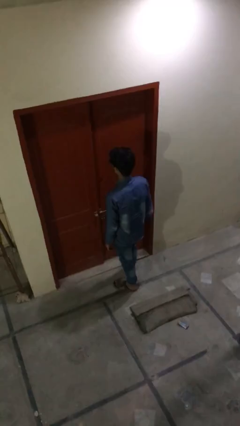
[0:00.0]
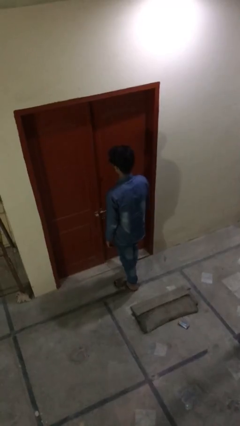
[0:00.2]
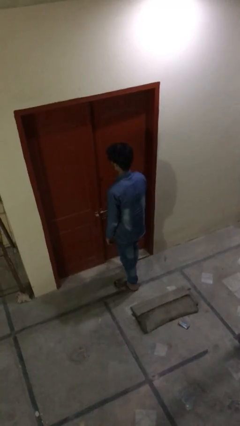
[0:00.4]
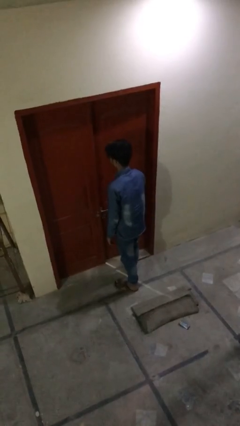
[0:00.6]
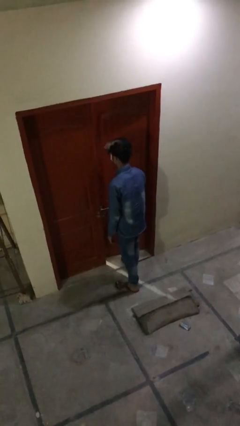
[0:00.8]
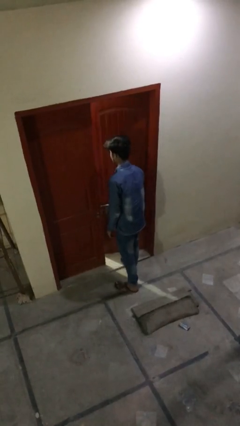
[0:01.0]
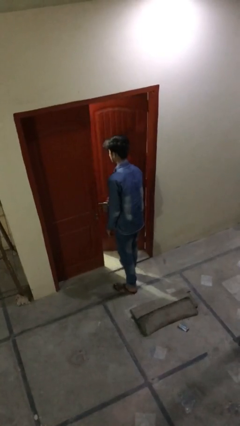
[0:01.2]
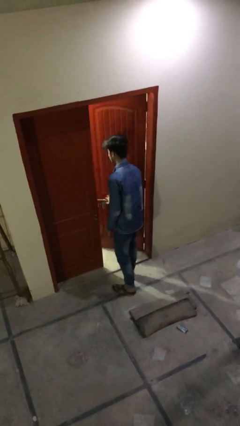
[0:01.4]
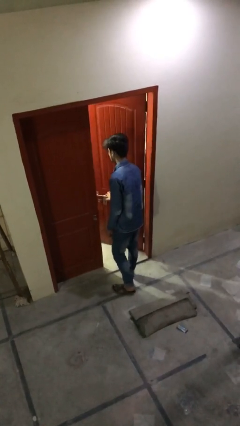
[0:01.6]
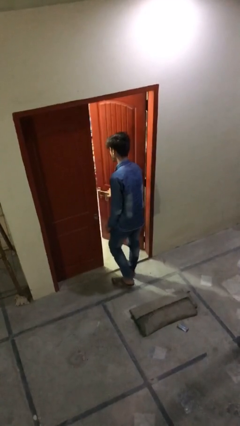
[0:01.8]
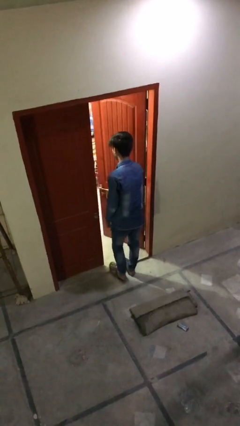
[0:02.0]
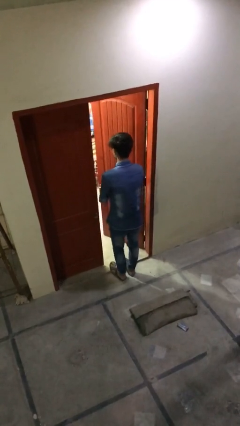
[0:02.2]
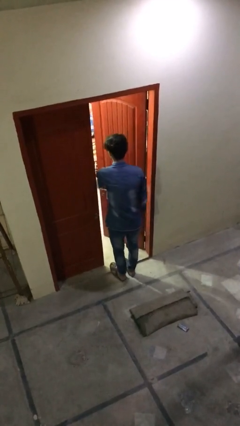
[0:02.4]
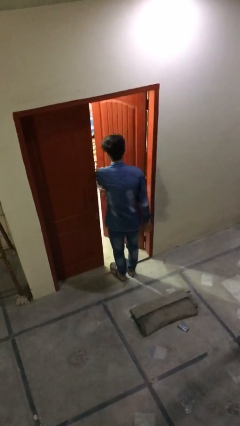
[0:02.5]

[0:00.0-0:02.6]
person opens facility door

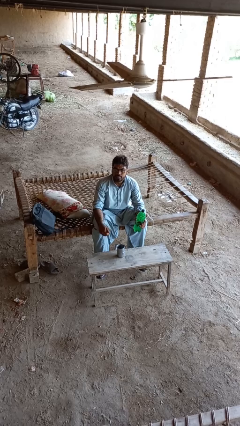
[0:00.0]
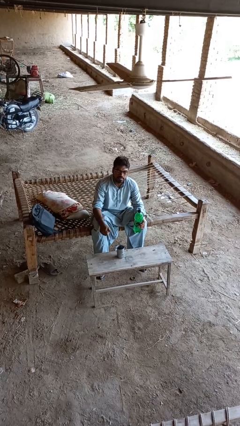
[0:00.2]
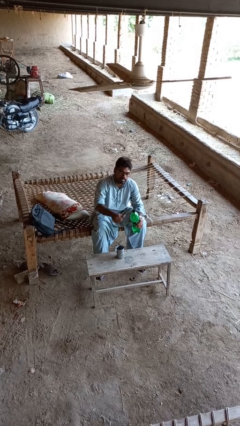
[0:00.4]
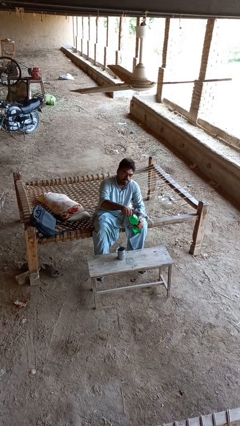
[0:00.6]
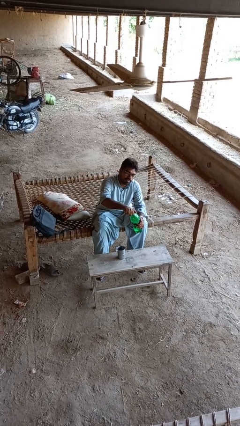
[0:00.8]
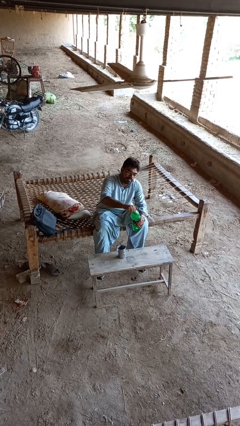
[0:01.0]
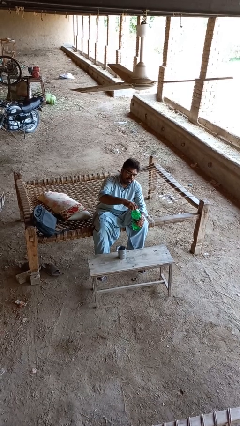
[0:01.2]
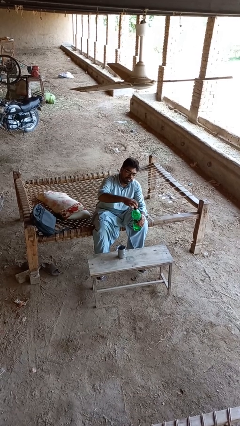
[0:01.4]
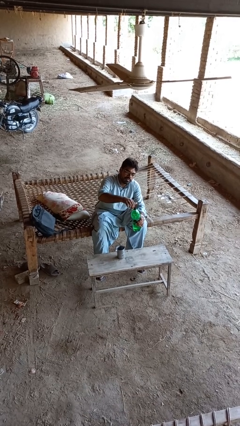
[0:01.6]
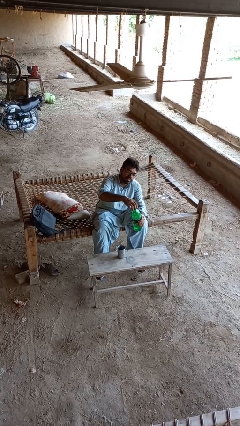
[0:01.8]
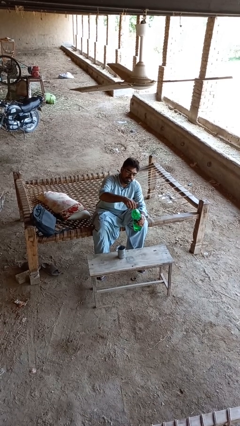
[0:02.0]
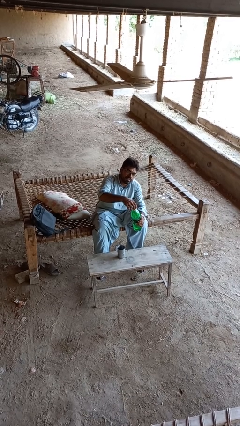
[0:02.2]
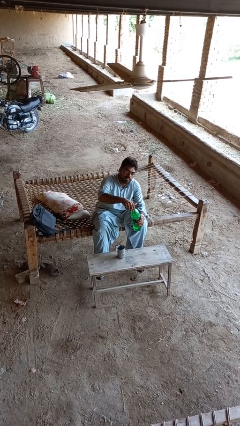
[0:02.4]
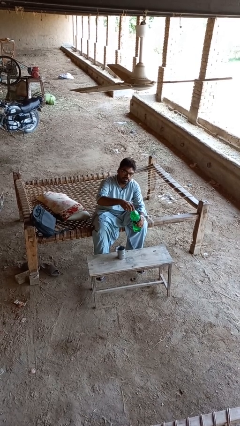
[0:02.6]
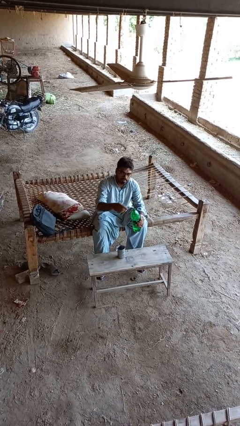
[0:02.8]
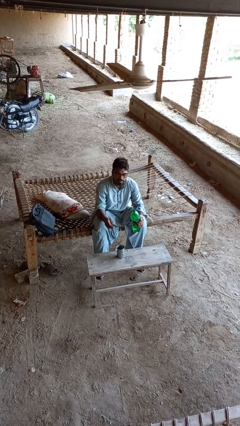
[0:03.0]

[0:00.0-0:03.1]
person unscrews lid from bottle

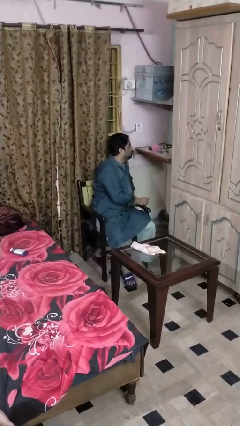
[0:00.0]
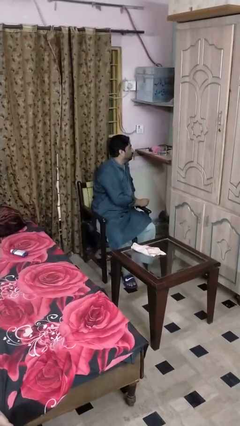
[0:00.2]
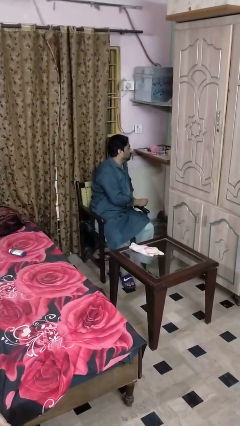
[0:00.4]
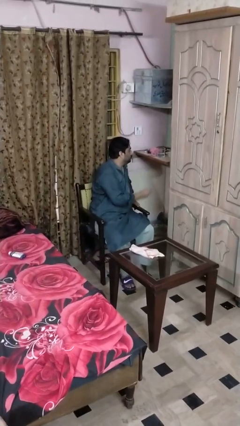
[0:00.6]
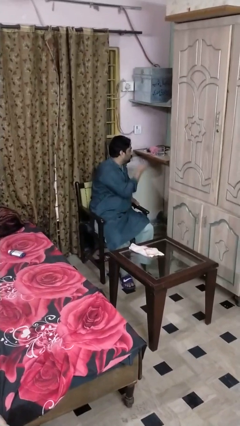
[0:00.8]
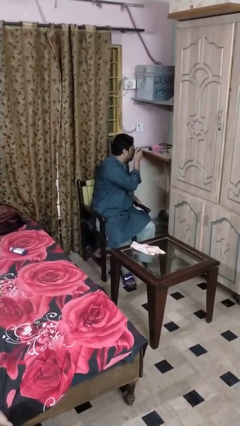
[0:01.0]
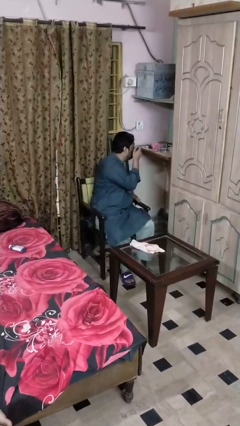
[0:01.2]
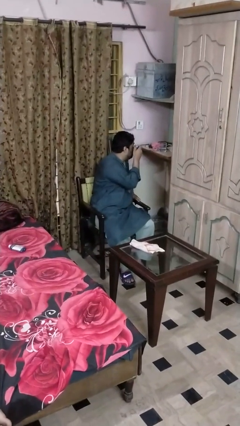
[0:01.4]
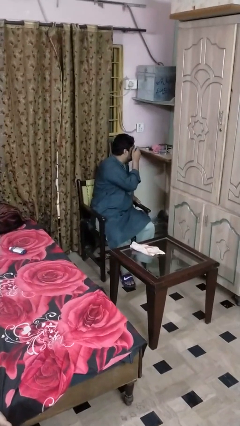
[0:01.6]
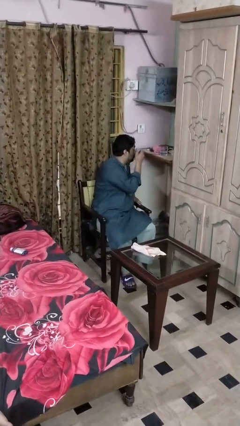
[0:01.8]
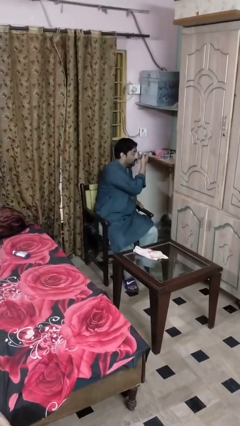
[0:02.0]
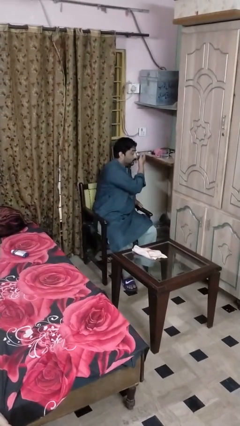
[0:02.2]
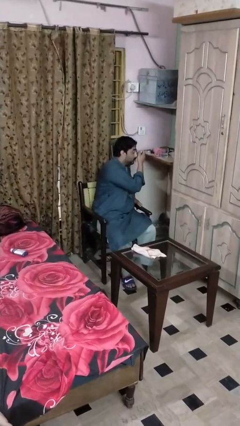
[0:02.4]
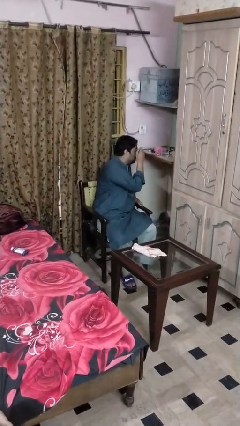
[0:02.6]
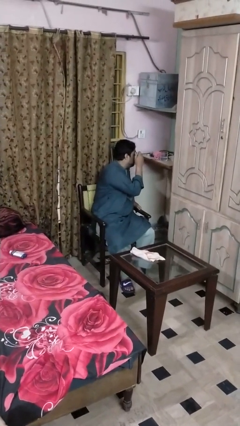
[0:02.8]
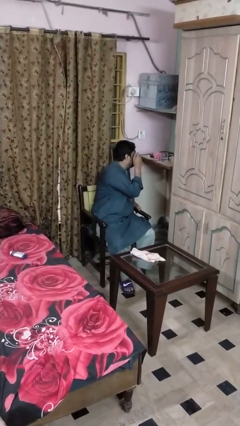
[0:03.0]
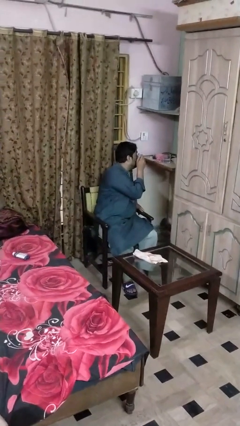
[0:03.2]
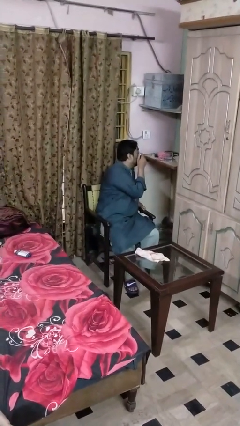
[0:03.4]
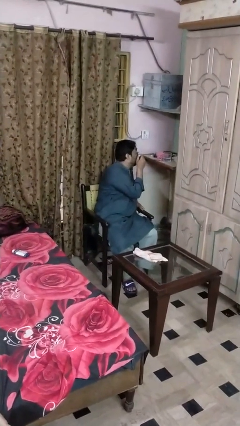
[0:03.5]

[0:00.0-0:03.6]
person applies eye makeup

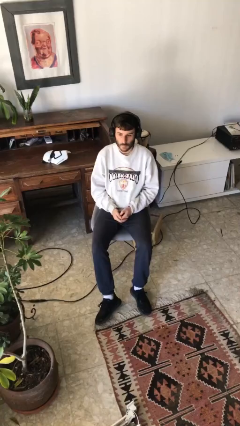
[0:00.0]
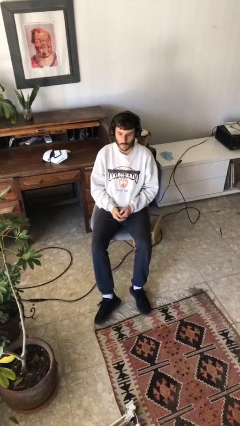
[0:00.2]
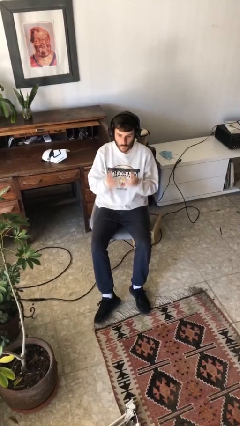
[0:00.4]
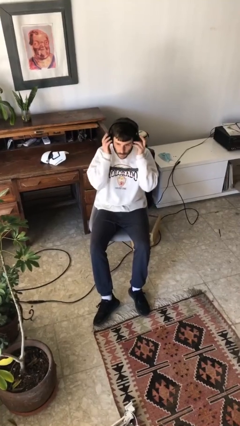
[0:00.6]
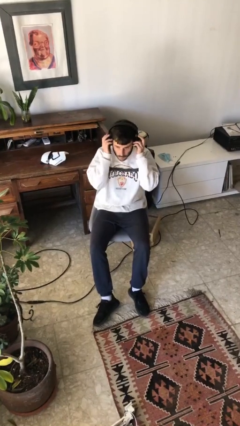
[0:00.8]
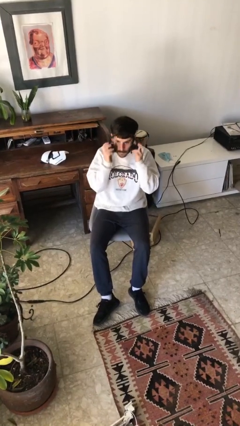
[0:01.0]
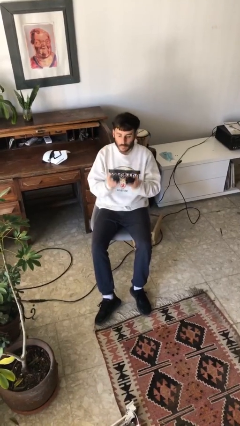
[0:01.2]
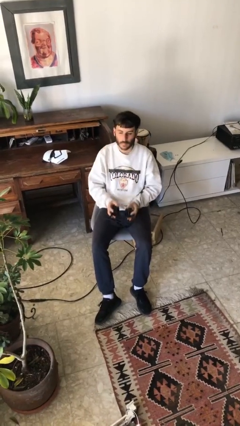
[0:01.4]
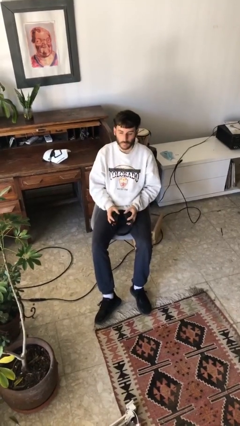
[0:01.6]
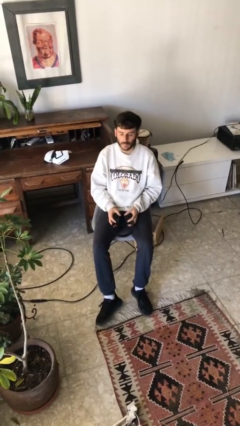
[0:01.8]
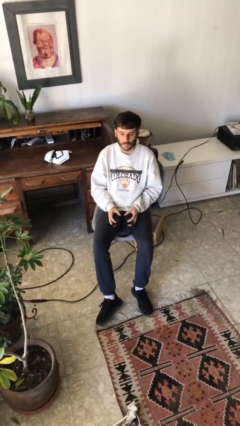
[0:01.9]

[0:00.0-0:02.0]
person takes off headphones

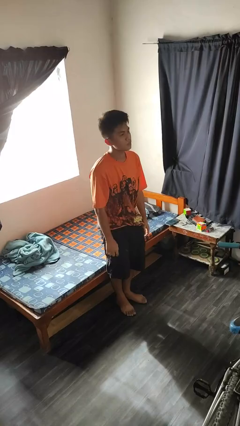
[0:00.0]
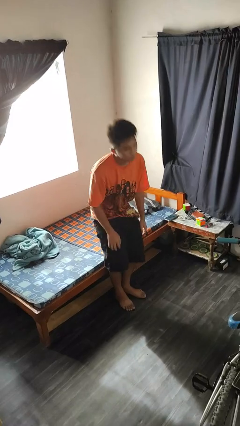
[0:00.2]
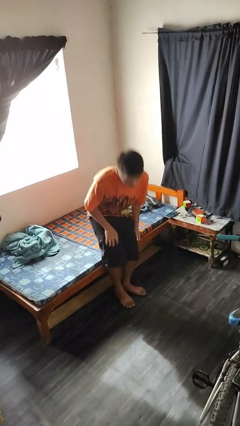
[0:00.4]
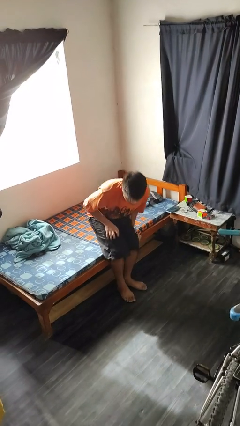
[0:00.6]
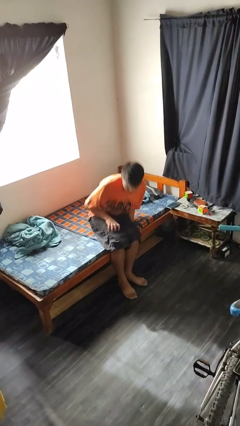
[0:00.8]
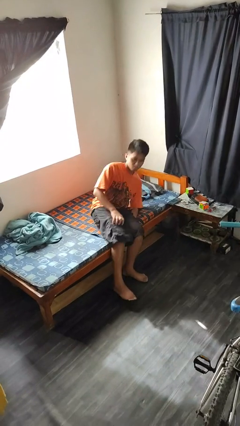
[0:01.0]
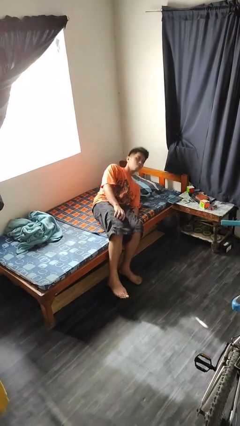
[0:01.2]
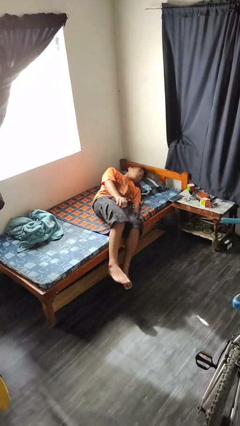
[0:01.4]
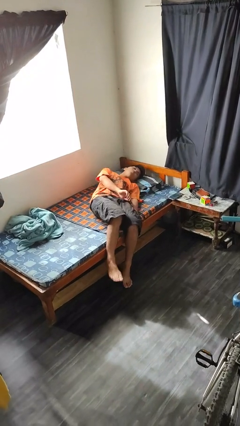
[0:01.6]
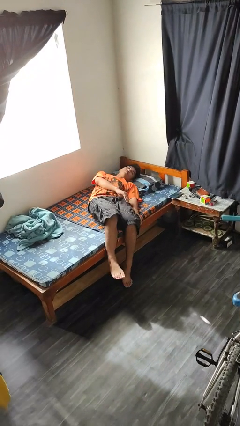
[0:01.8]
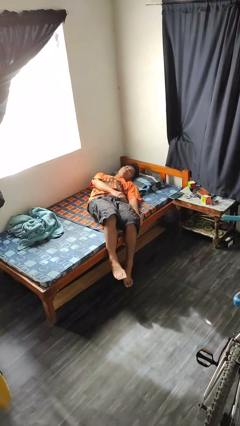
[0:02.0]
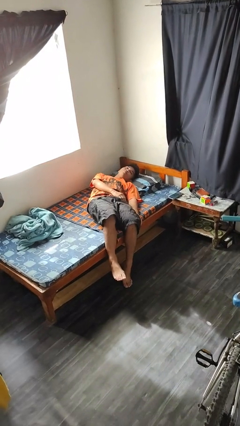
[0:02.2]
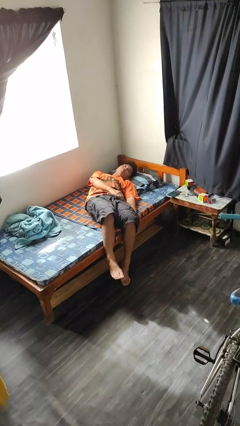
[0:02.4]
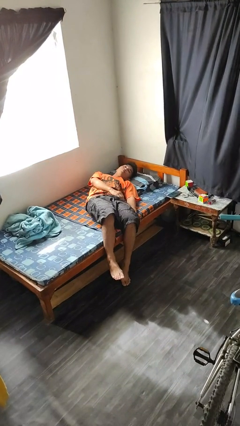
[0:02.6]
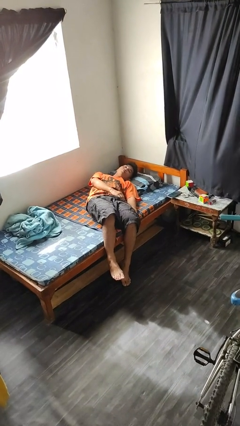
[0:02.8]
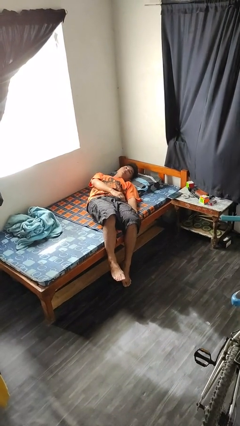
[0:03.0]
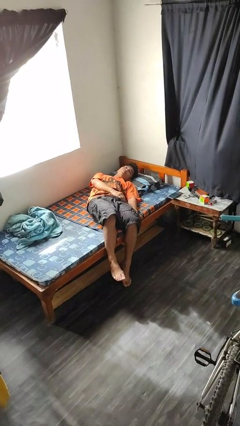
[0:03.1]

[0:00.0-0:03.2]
person lies down on bed

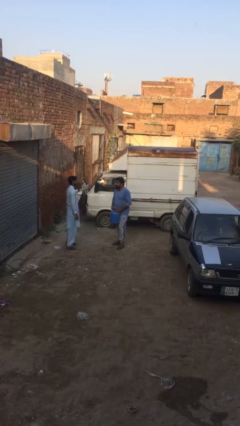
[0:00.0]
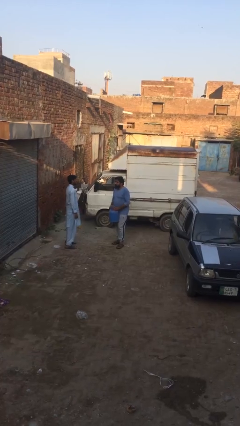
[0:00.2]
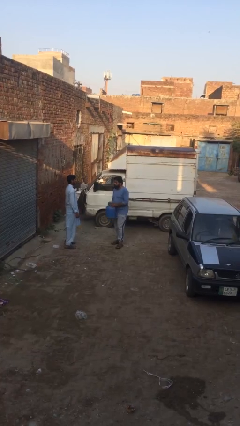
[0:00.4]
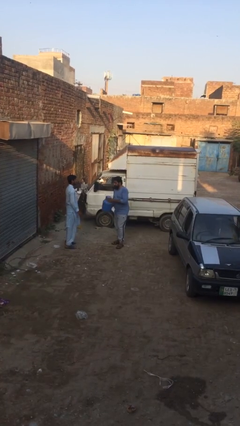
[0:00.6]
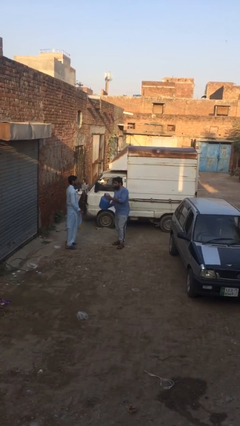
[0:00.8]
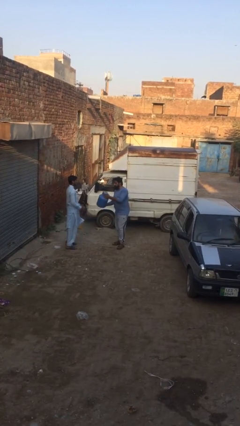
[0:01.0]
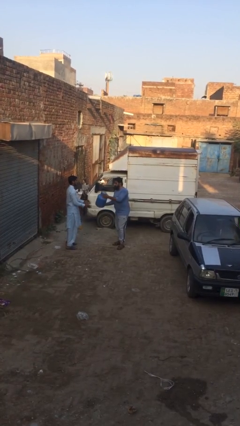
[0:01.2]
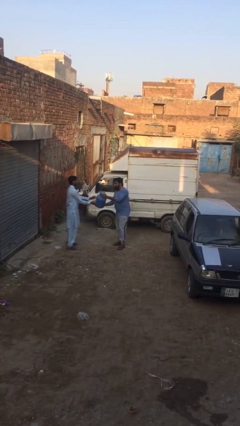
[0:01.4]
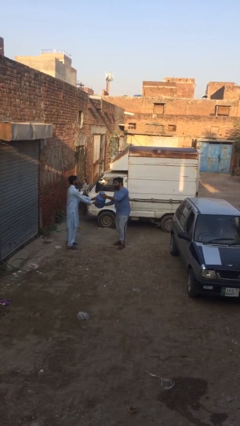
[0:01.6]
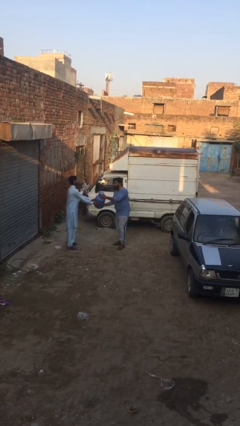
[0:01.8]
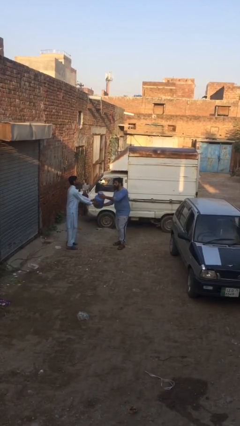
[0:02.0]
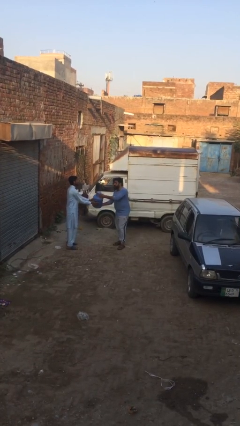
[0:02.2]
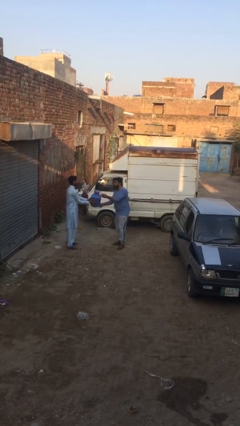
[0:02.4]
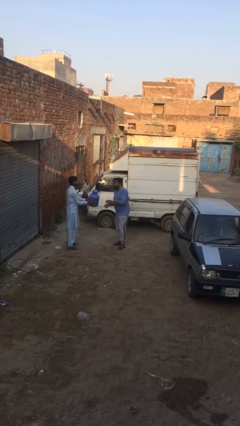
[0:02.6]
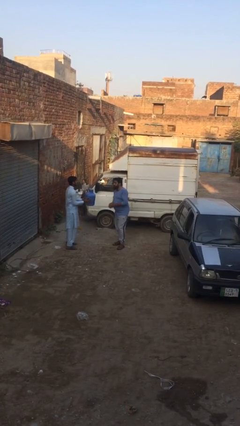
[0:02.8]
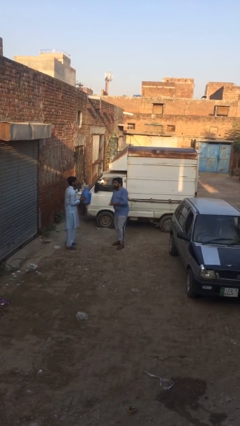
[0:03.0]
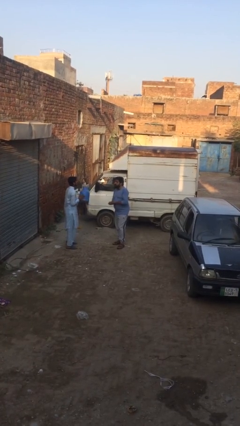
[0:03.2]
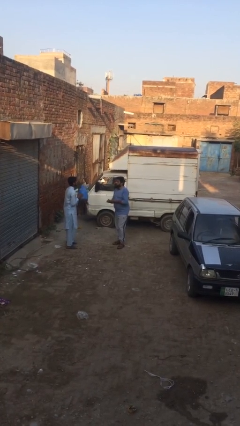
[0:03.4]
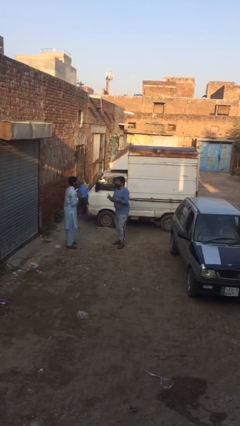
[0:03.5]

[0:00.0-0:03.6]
person transfers object to person
